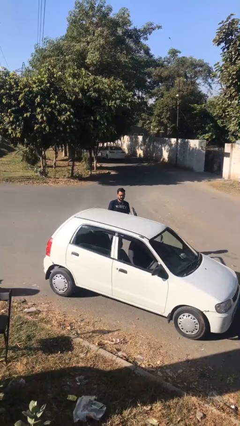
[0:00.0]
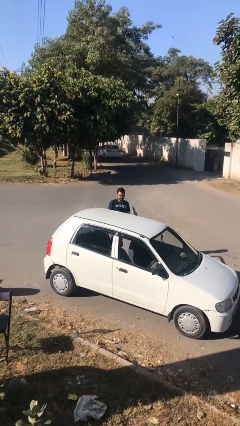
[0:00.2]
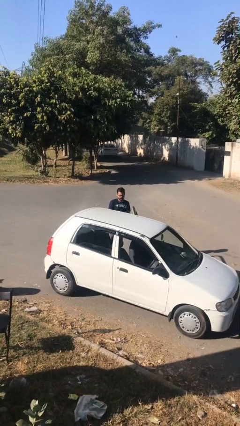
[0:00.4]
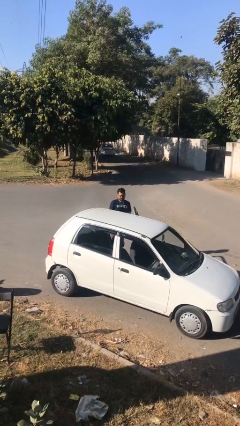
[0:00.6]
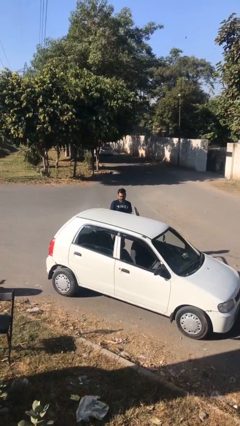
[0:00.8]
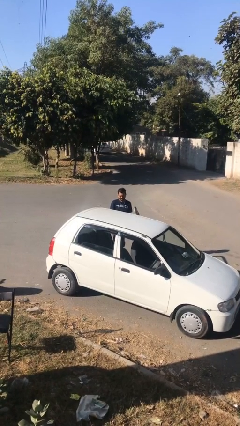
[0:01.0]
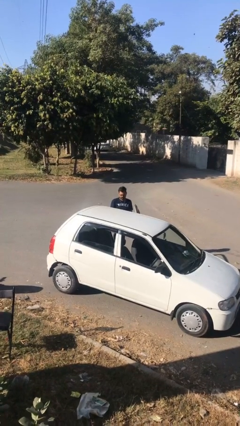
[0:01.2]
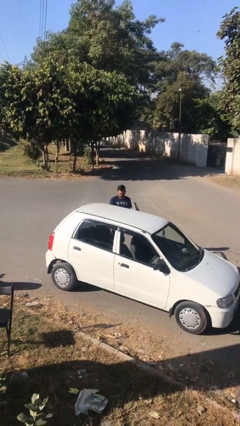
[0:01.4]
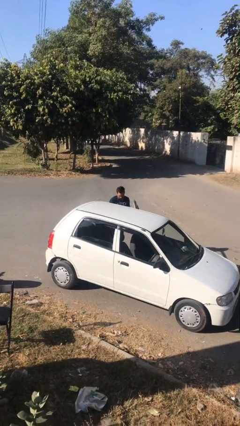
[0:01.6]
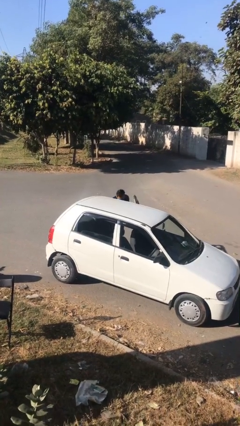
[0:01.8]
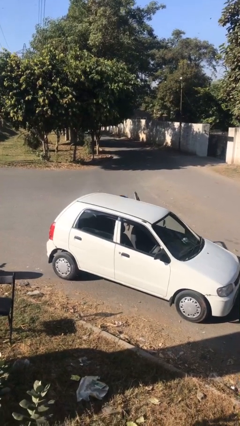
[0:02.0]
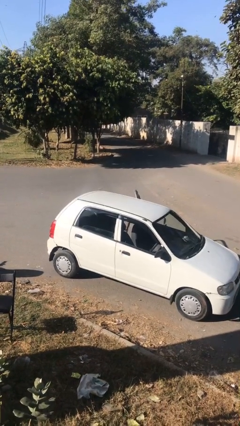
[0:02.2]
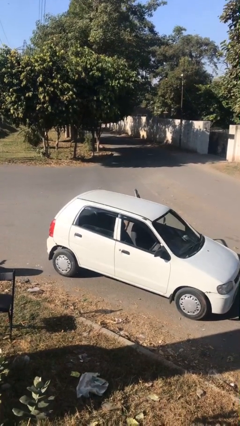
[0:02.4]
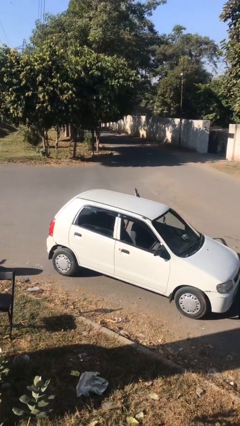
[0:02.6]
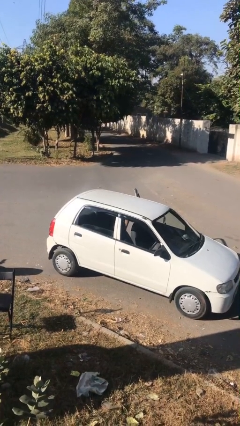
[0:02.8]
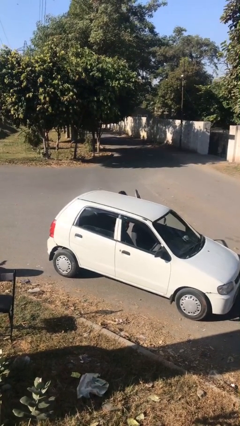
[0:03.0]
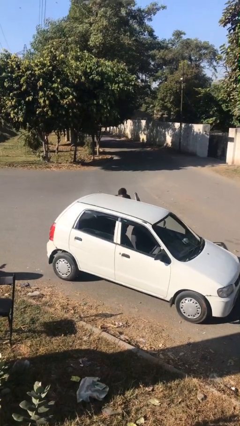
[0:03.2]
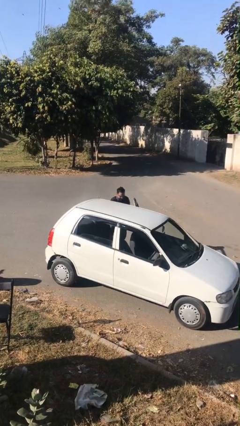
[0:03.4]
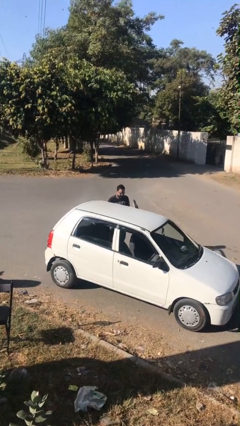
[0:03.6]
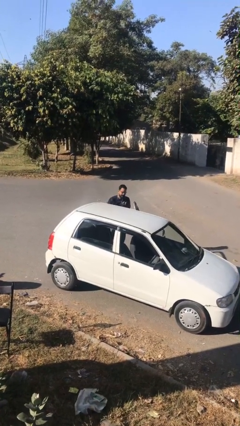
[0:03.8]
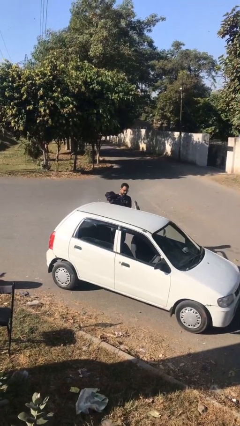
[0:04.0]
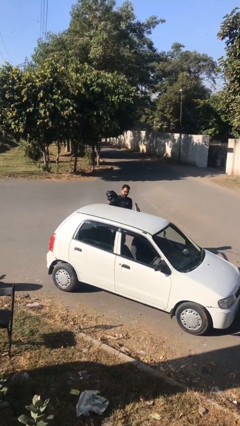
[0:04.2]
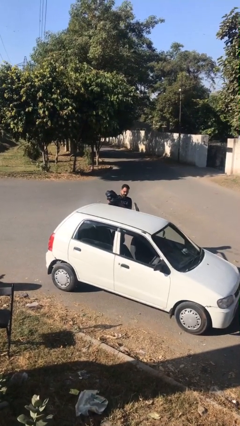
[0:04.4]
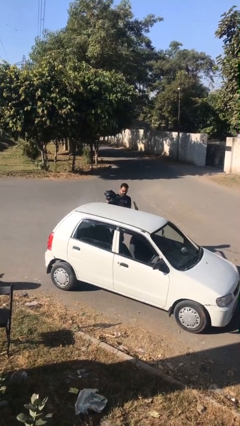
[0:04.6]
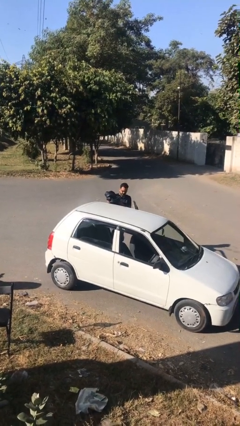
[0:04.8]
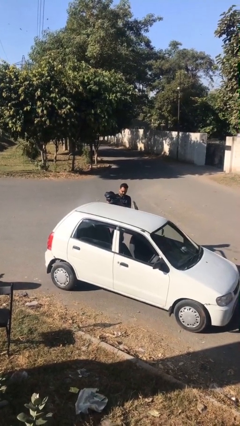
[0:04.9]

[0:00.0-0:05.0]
person unloads car

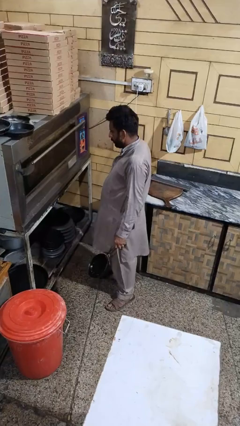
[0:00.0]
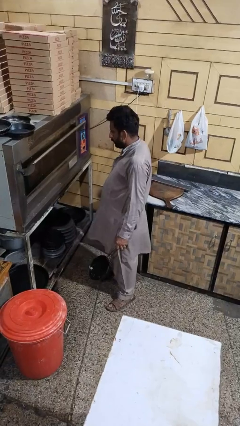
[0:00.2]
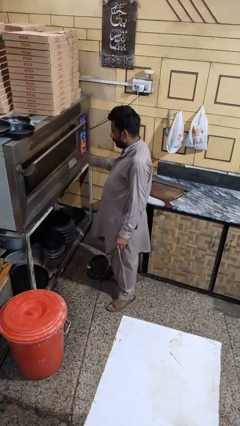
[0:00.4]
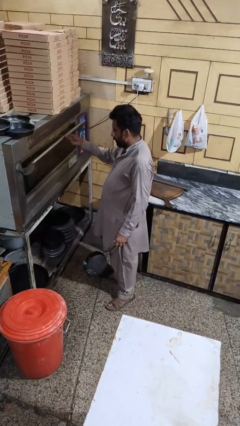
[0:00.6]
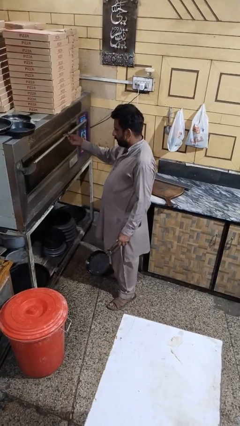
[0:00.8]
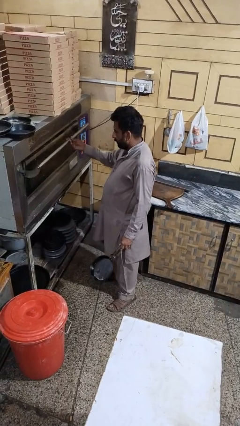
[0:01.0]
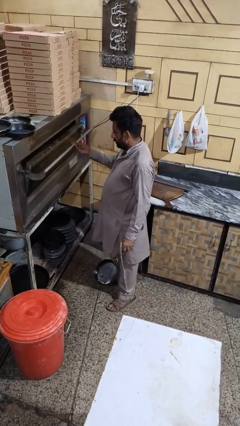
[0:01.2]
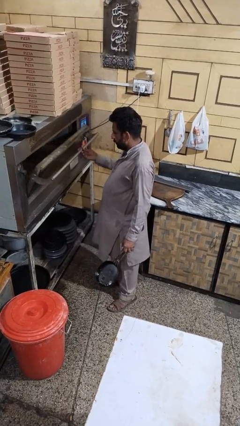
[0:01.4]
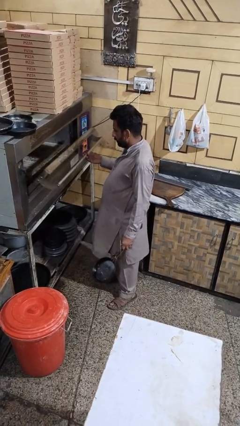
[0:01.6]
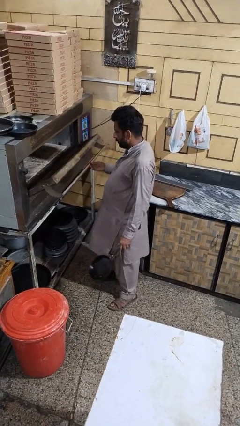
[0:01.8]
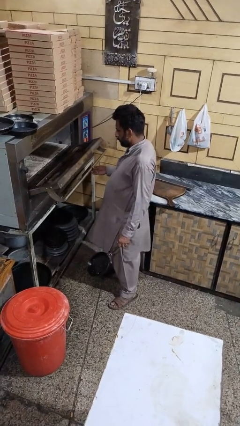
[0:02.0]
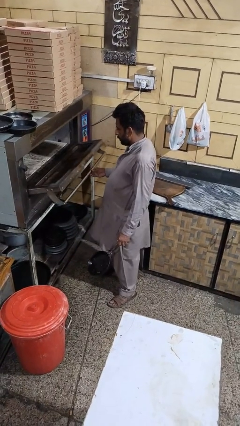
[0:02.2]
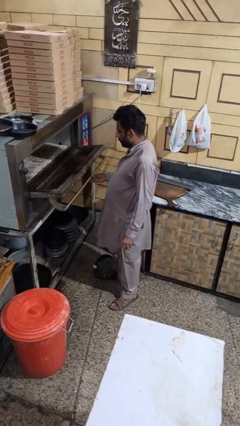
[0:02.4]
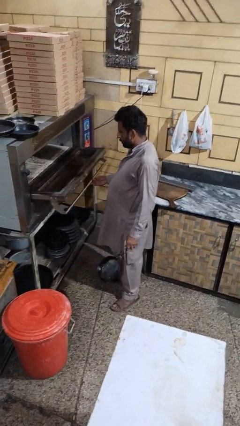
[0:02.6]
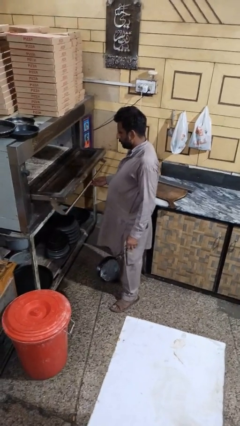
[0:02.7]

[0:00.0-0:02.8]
person opens microwave

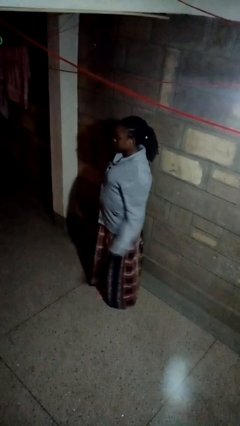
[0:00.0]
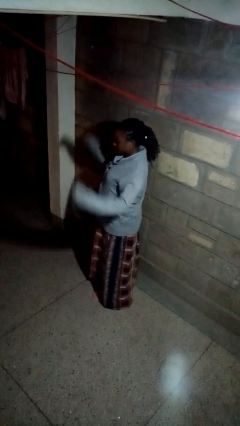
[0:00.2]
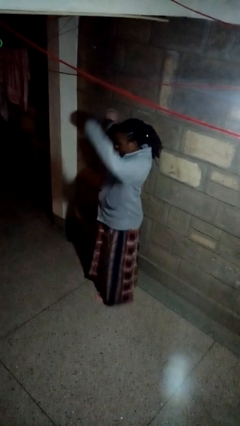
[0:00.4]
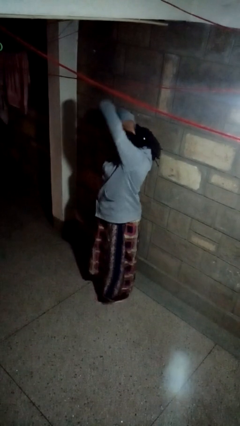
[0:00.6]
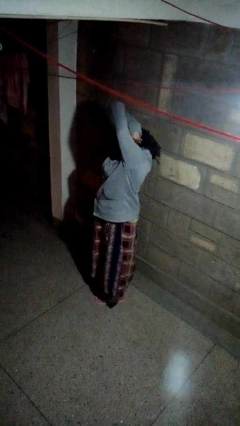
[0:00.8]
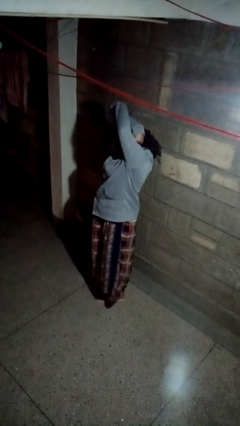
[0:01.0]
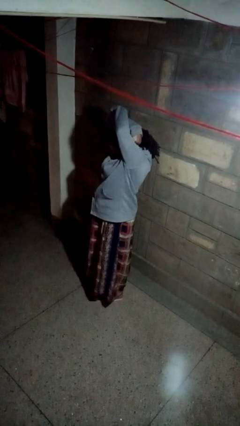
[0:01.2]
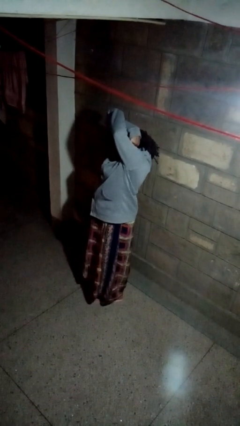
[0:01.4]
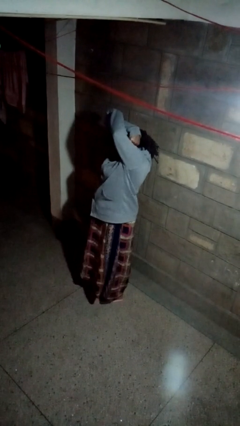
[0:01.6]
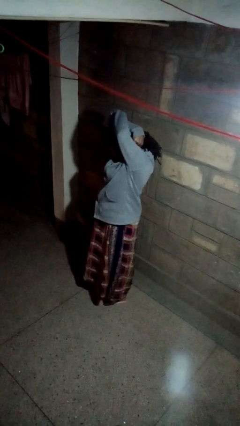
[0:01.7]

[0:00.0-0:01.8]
person stretches arms over head

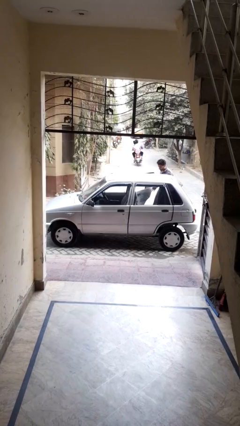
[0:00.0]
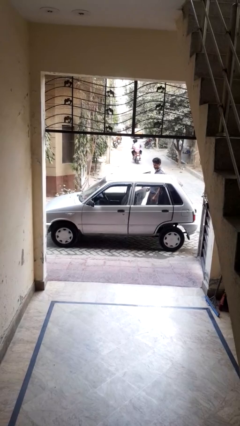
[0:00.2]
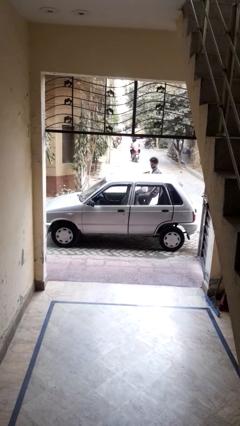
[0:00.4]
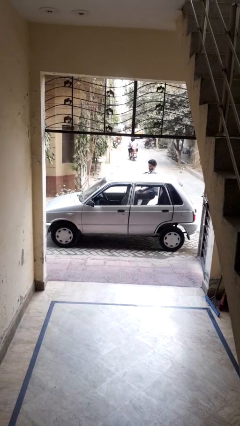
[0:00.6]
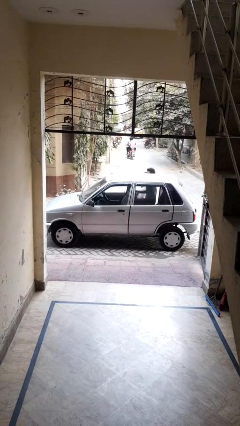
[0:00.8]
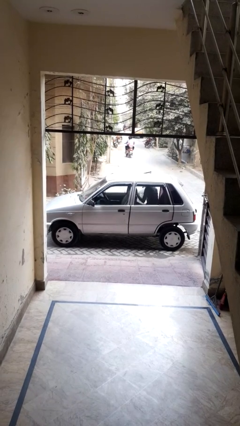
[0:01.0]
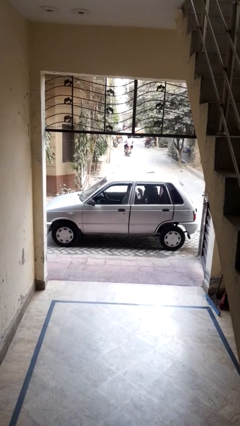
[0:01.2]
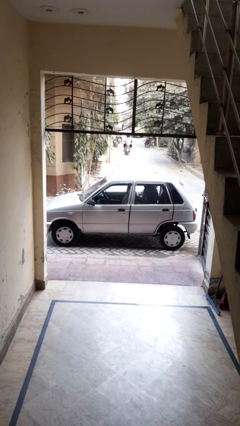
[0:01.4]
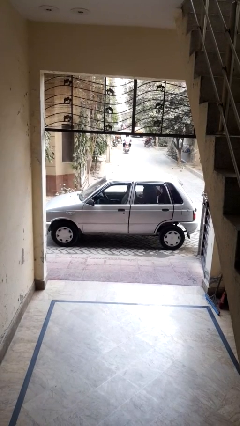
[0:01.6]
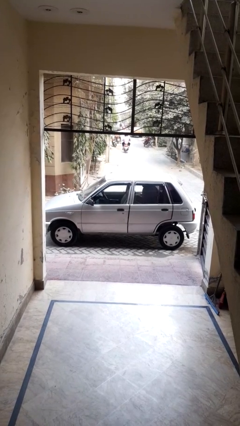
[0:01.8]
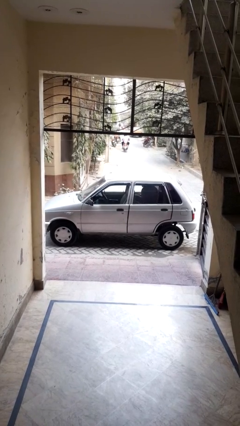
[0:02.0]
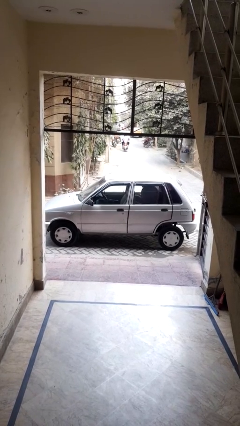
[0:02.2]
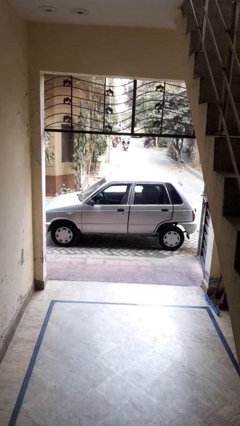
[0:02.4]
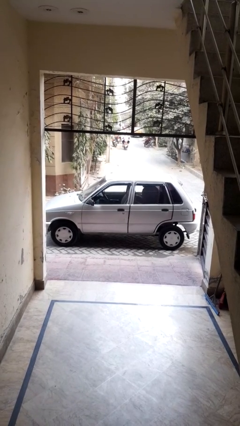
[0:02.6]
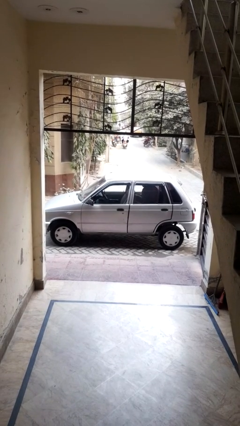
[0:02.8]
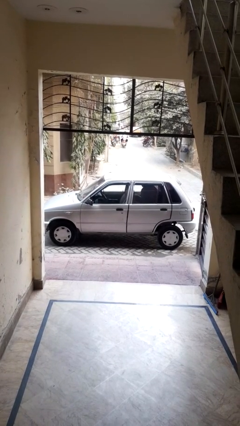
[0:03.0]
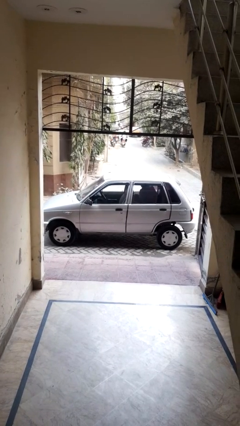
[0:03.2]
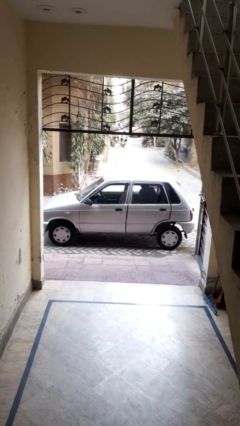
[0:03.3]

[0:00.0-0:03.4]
car picks up person

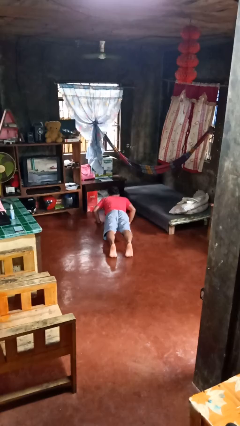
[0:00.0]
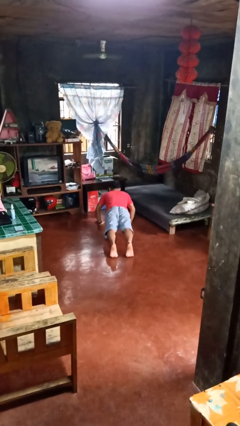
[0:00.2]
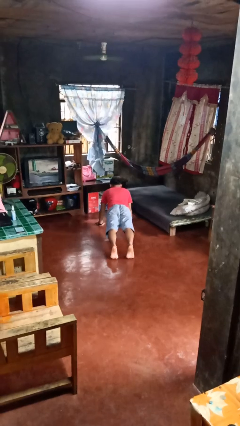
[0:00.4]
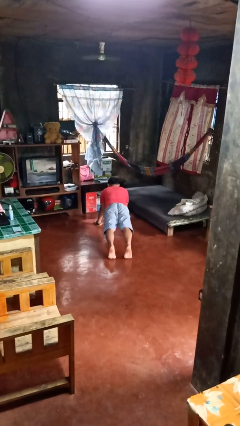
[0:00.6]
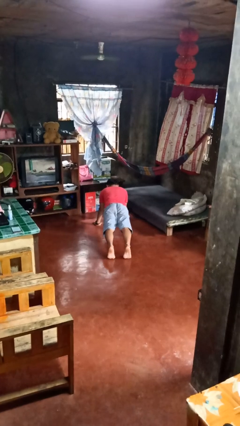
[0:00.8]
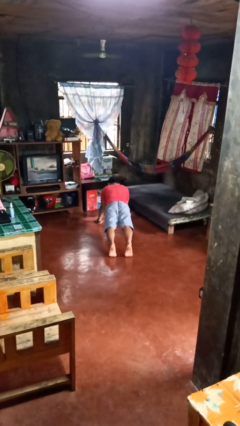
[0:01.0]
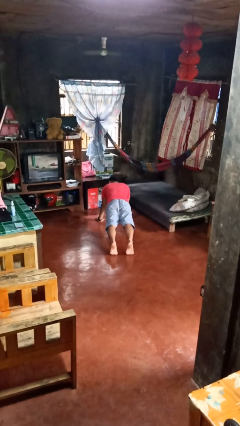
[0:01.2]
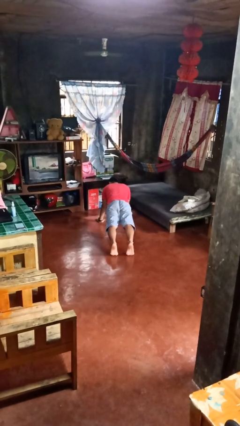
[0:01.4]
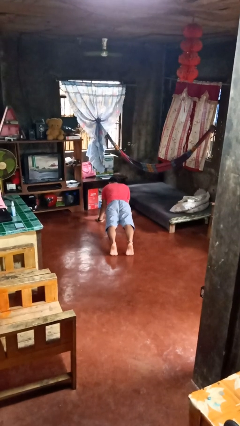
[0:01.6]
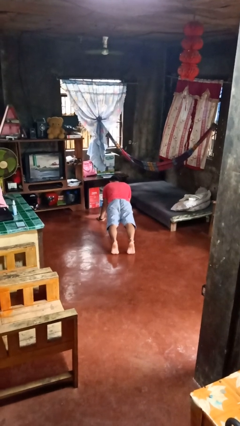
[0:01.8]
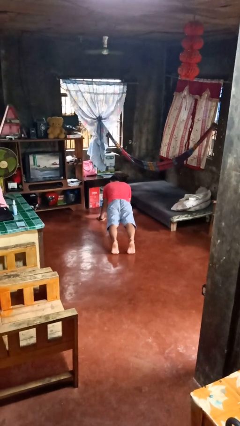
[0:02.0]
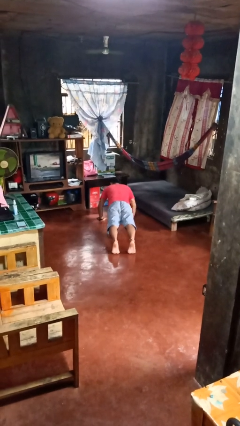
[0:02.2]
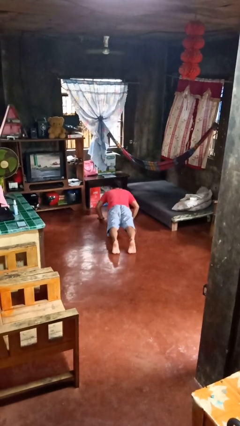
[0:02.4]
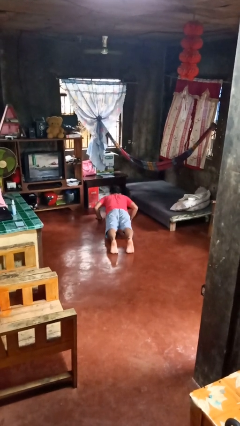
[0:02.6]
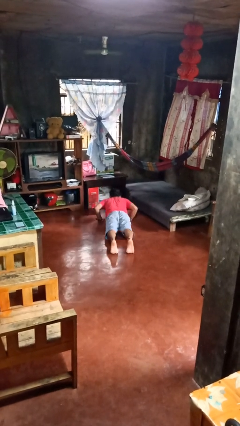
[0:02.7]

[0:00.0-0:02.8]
person exercises with pushup

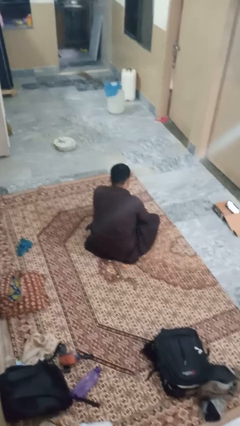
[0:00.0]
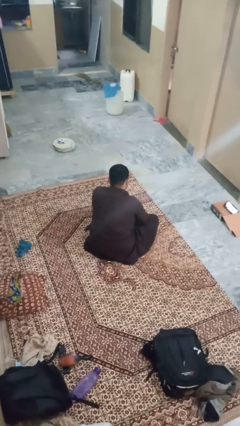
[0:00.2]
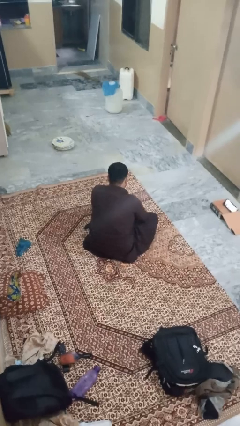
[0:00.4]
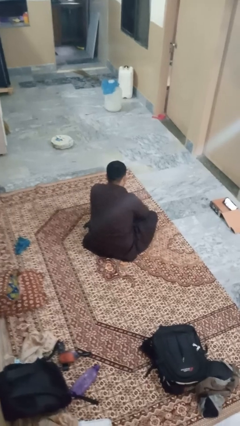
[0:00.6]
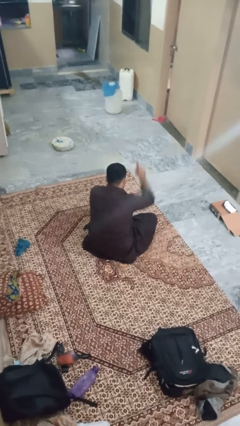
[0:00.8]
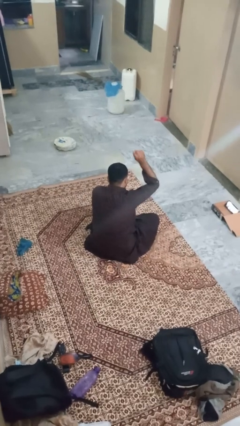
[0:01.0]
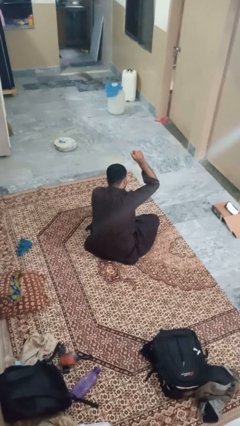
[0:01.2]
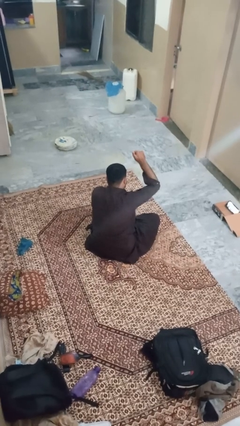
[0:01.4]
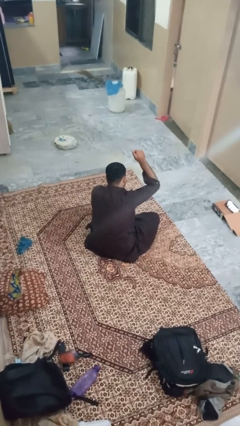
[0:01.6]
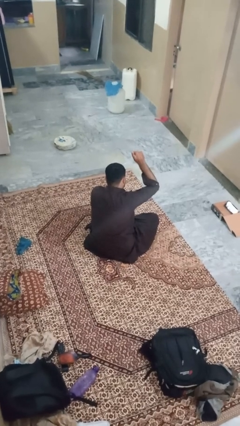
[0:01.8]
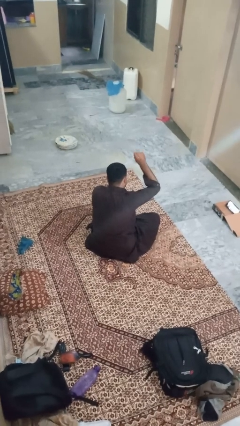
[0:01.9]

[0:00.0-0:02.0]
person gestures number one

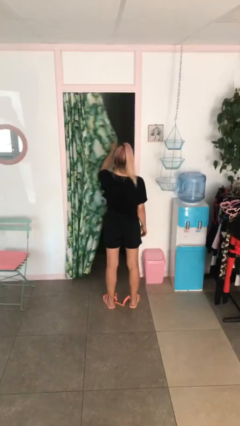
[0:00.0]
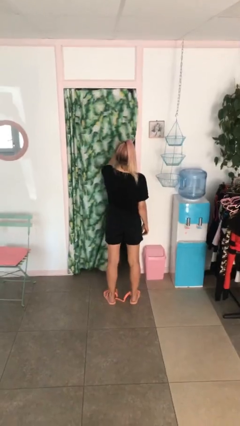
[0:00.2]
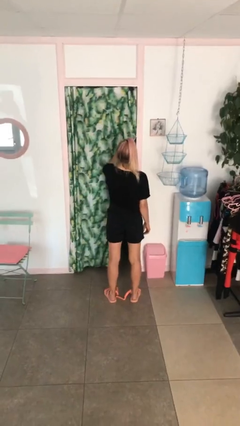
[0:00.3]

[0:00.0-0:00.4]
person closes sliding door
